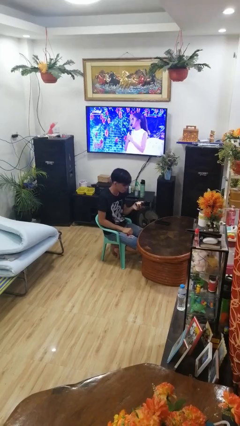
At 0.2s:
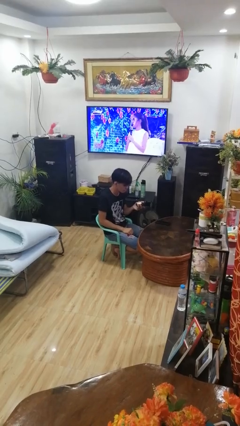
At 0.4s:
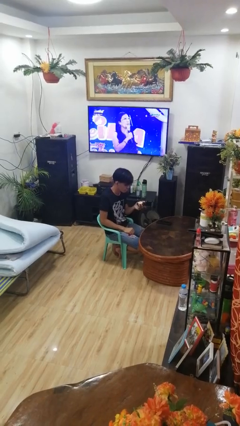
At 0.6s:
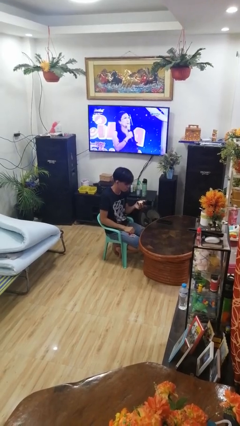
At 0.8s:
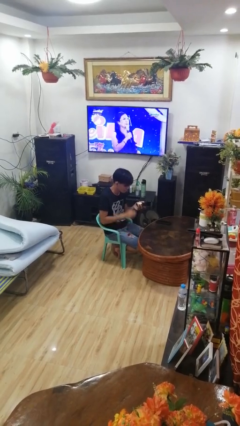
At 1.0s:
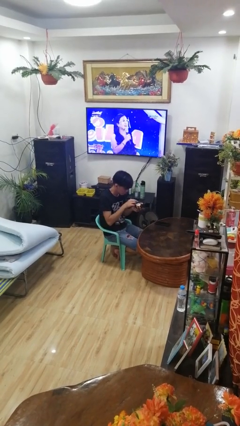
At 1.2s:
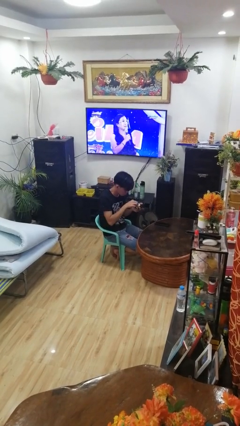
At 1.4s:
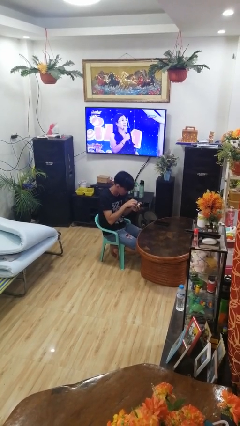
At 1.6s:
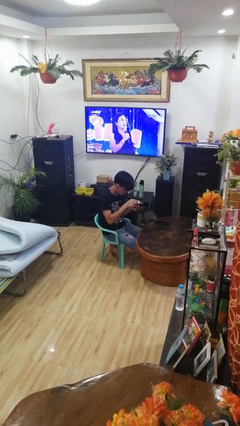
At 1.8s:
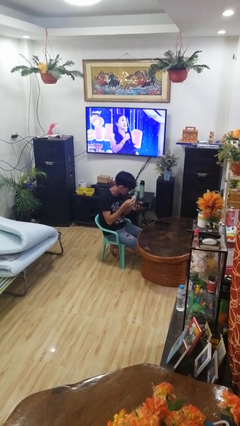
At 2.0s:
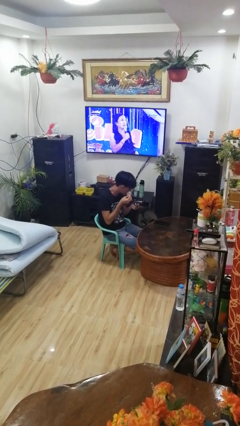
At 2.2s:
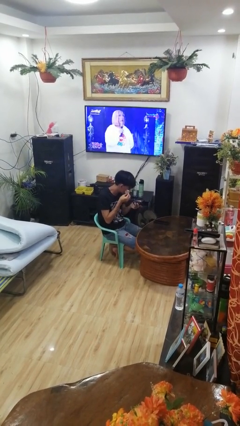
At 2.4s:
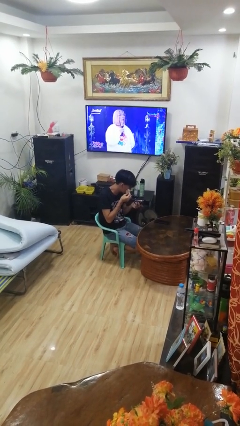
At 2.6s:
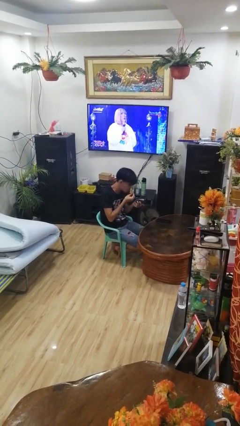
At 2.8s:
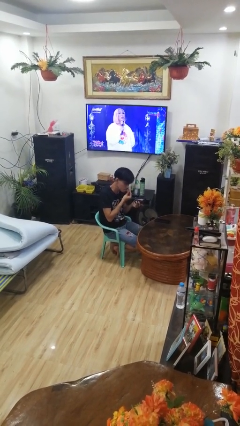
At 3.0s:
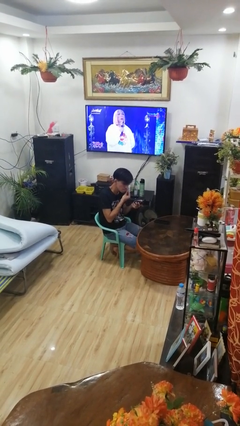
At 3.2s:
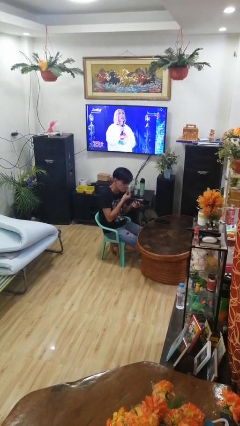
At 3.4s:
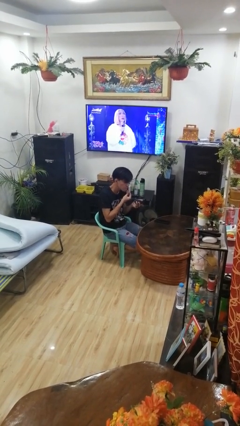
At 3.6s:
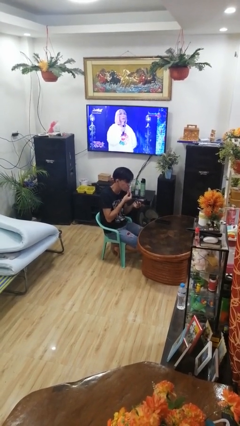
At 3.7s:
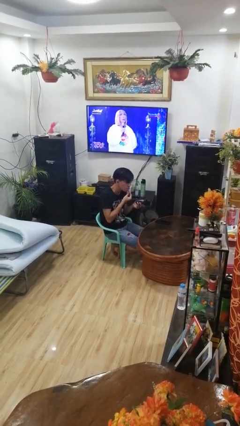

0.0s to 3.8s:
person applies foundation makeup

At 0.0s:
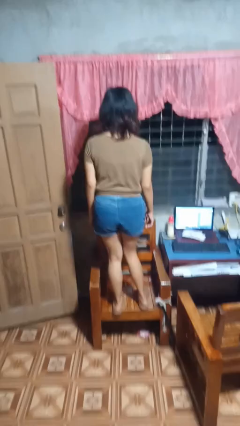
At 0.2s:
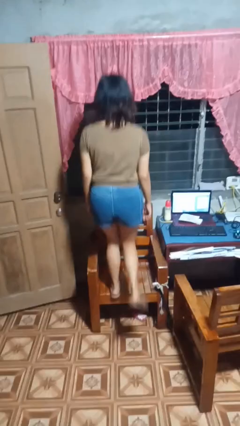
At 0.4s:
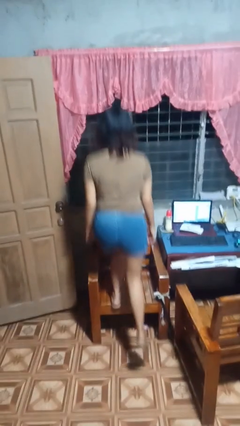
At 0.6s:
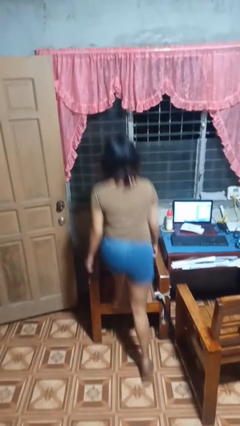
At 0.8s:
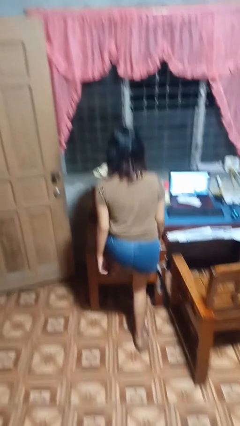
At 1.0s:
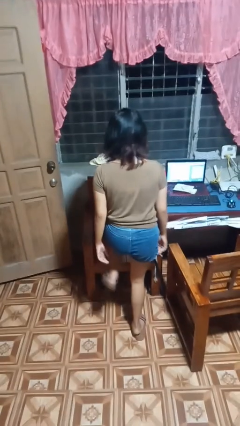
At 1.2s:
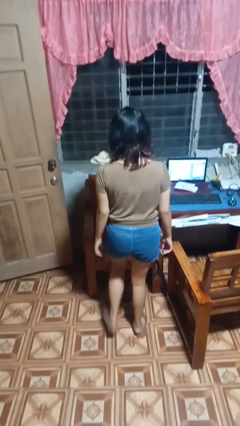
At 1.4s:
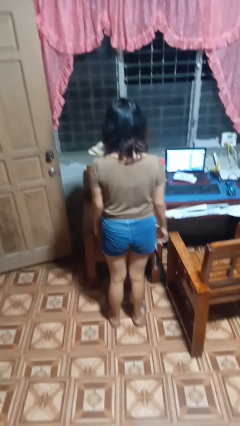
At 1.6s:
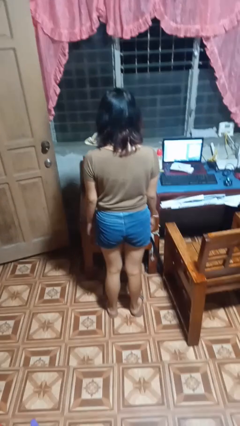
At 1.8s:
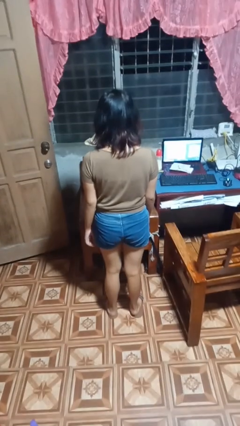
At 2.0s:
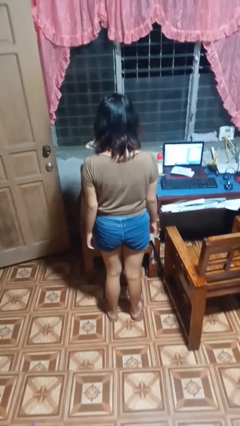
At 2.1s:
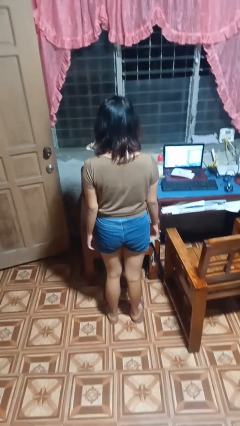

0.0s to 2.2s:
person climbs off chair

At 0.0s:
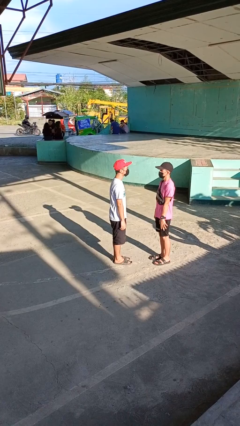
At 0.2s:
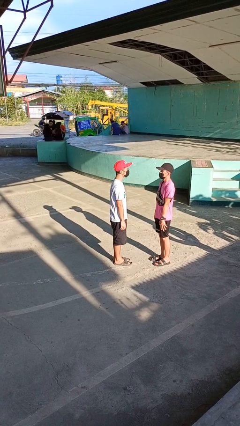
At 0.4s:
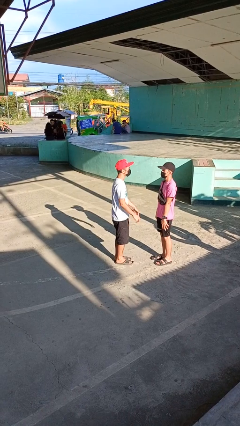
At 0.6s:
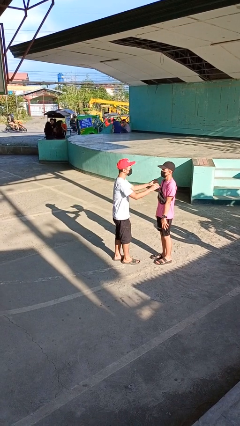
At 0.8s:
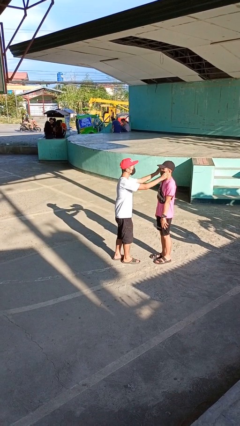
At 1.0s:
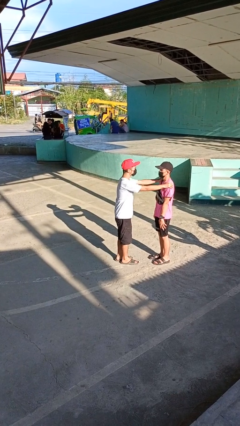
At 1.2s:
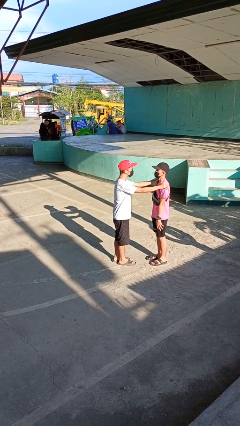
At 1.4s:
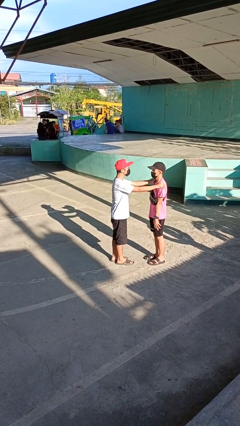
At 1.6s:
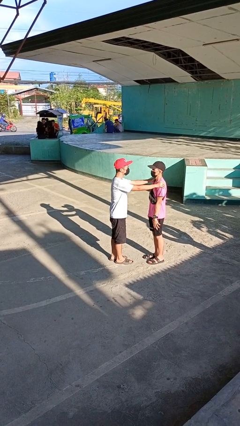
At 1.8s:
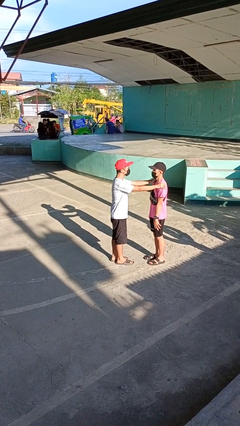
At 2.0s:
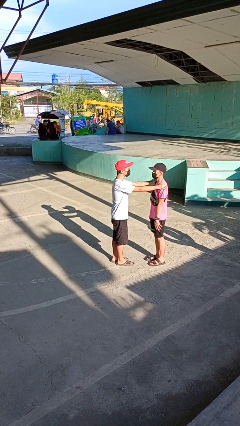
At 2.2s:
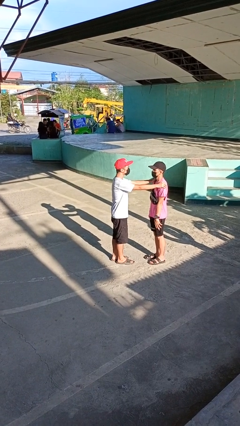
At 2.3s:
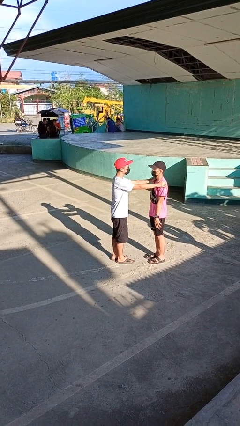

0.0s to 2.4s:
person grabs person by shoulder

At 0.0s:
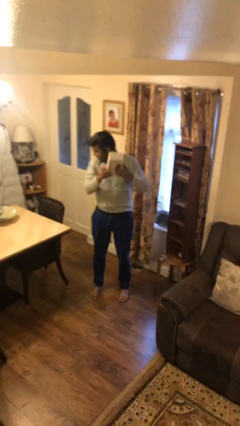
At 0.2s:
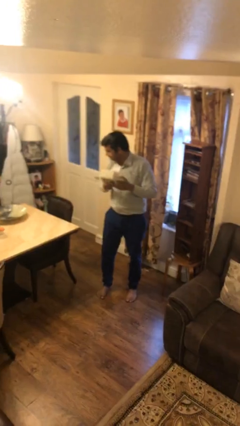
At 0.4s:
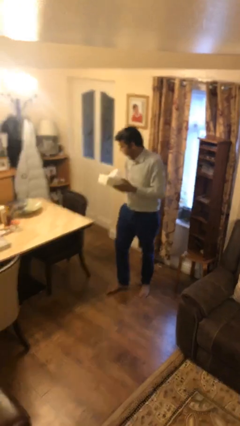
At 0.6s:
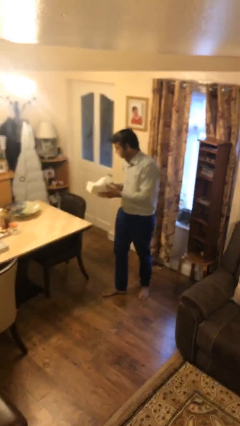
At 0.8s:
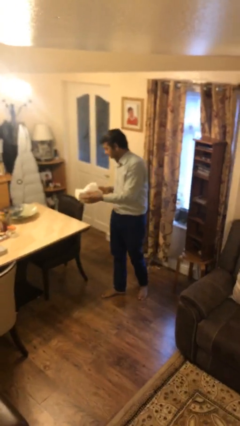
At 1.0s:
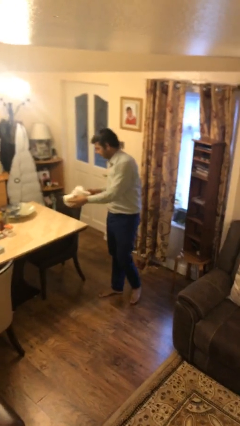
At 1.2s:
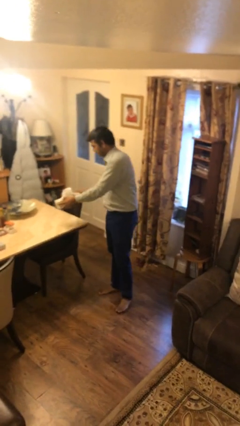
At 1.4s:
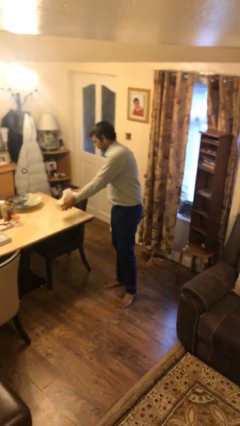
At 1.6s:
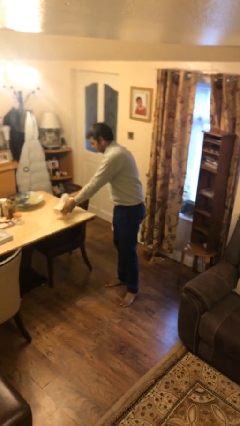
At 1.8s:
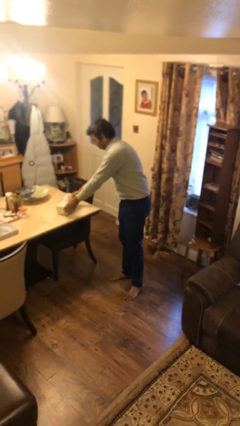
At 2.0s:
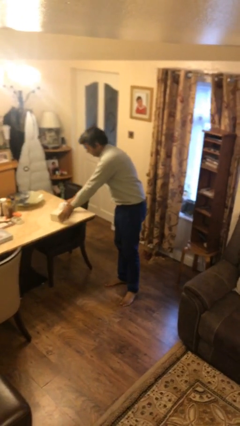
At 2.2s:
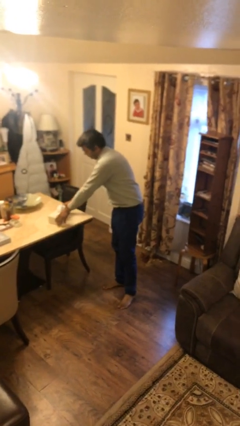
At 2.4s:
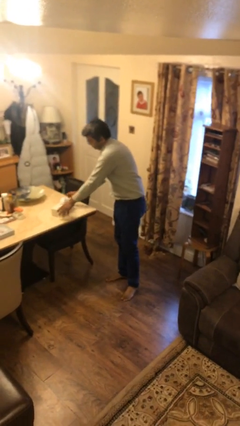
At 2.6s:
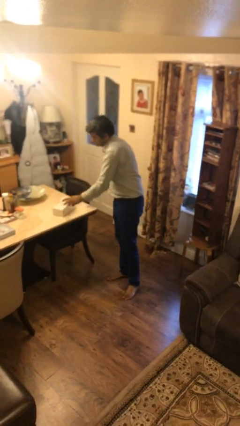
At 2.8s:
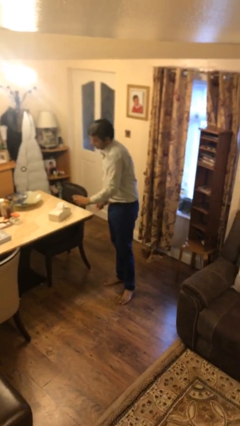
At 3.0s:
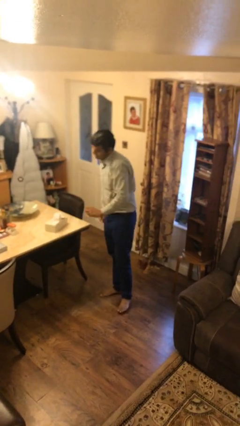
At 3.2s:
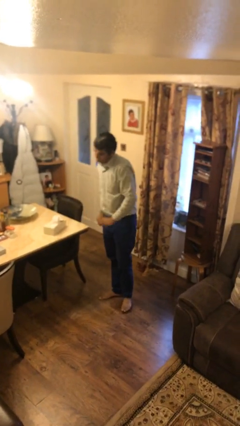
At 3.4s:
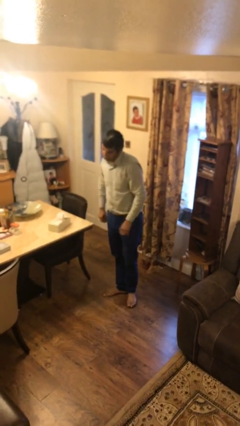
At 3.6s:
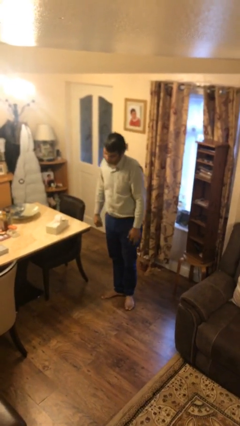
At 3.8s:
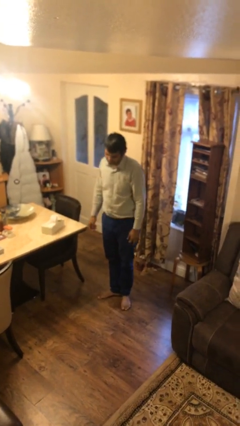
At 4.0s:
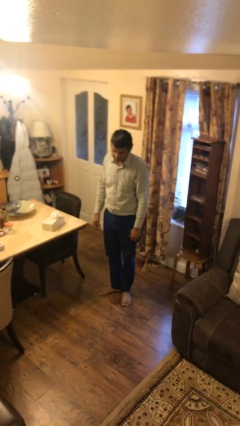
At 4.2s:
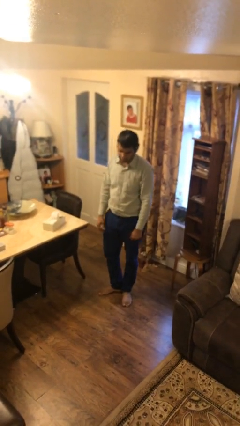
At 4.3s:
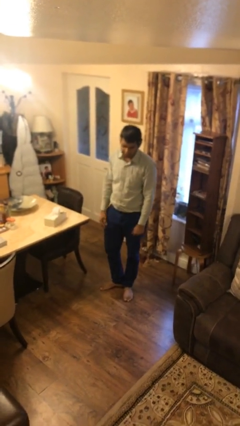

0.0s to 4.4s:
person puts down object on table

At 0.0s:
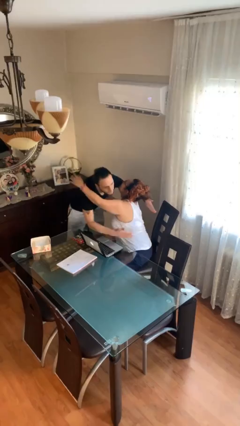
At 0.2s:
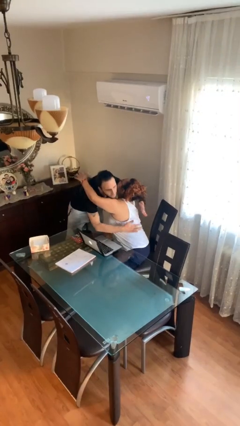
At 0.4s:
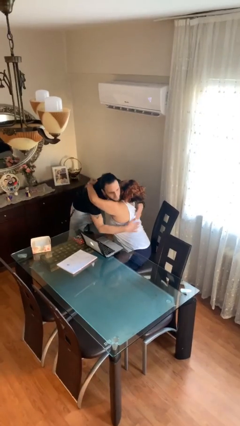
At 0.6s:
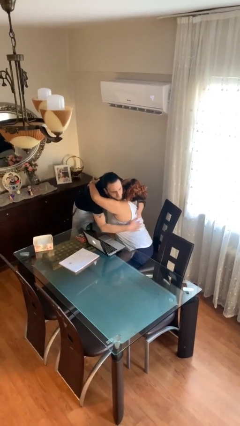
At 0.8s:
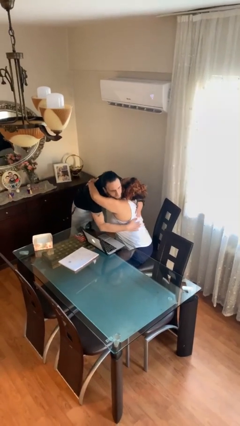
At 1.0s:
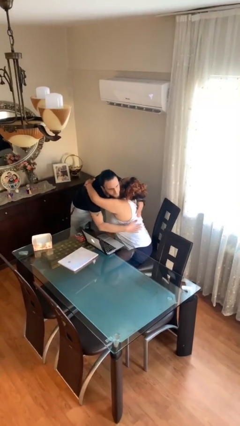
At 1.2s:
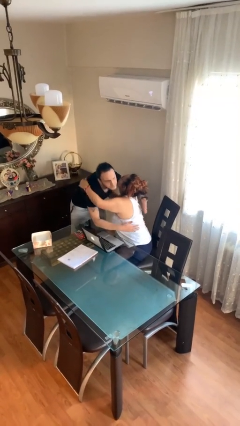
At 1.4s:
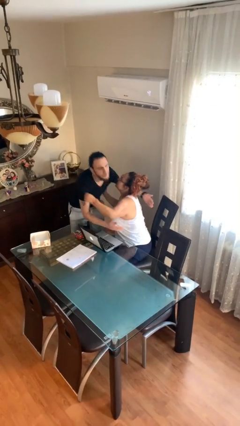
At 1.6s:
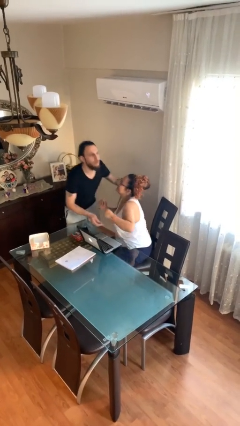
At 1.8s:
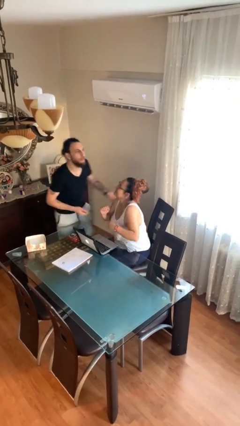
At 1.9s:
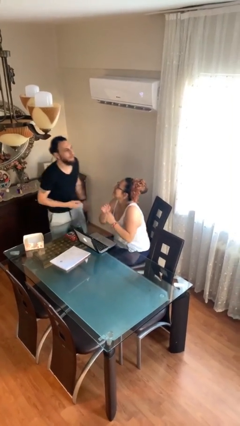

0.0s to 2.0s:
person embraces person

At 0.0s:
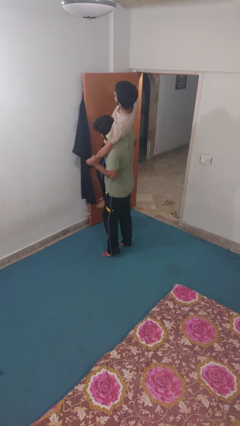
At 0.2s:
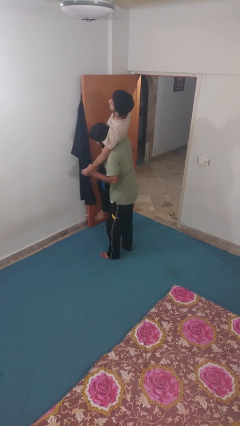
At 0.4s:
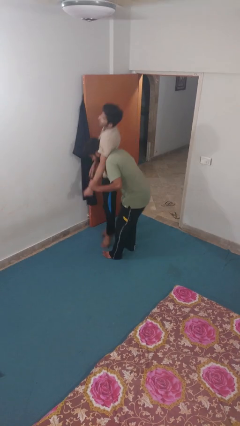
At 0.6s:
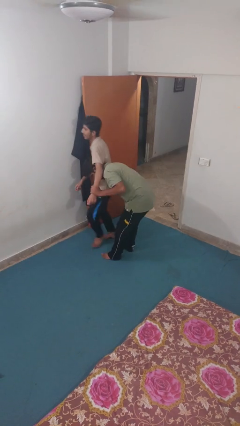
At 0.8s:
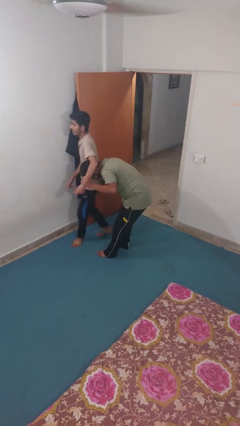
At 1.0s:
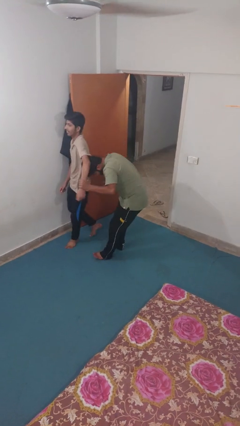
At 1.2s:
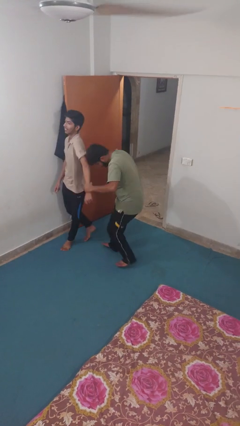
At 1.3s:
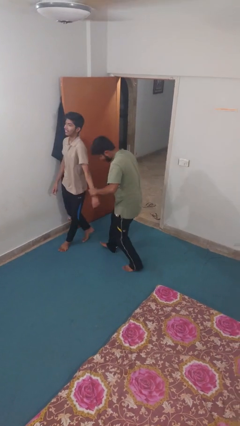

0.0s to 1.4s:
person puts down person

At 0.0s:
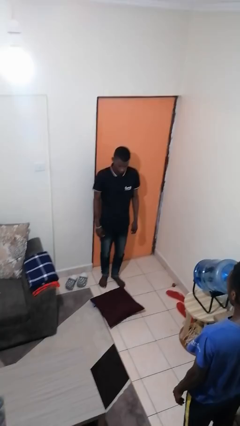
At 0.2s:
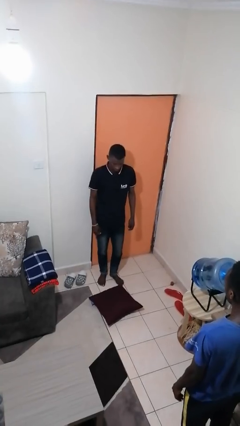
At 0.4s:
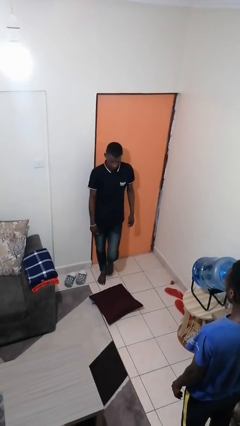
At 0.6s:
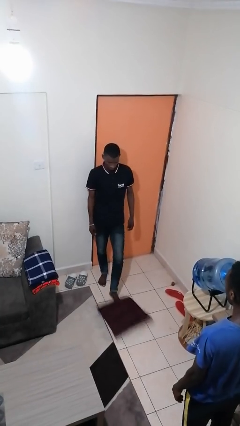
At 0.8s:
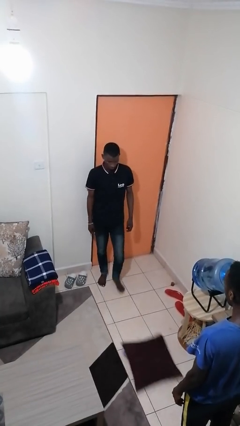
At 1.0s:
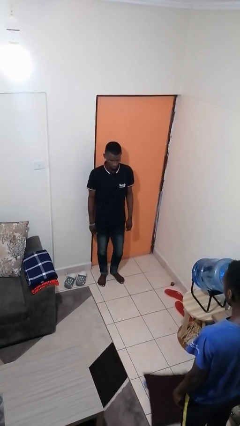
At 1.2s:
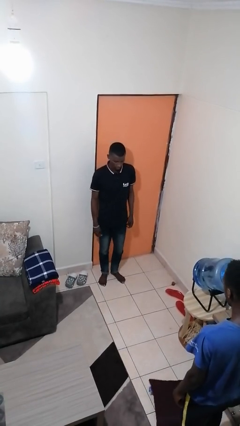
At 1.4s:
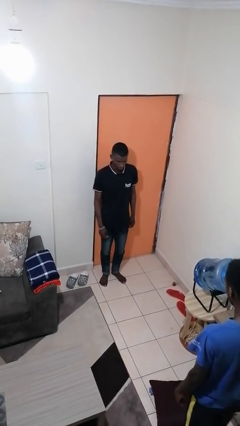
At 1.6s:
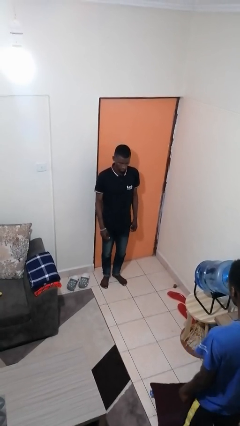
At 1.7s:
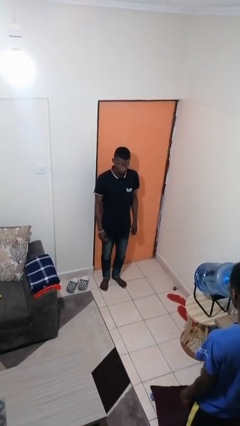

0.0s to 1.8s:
person kicks object to person
